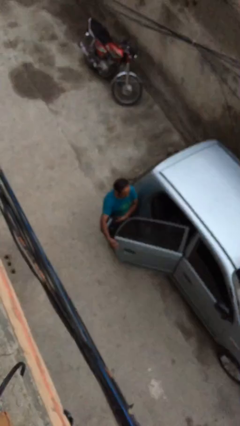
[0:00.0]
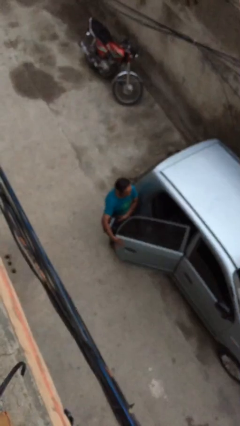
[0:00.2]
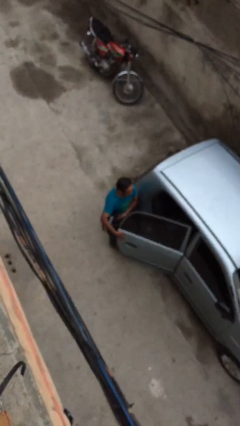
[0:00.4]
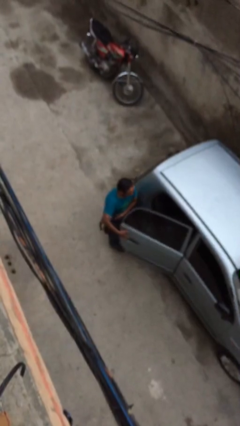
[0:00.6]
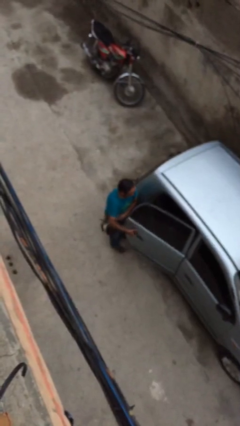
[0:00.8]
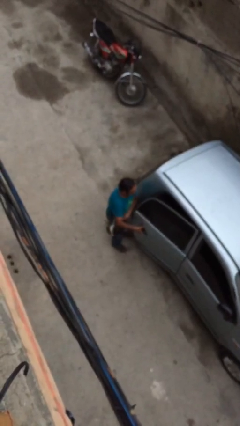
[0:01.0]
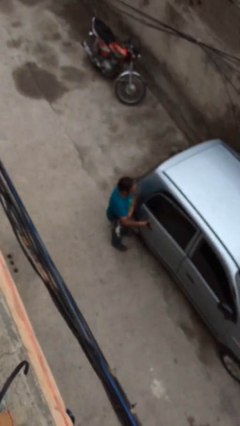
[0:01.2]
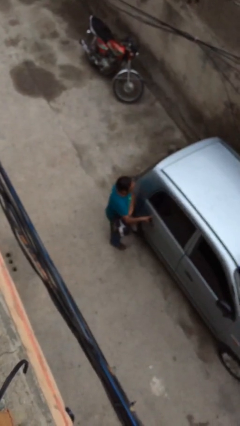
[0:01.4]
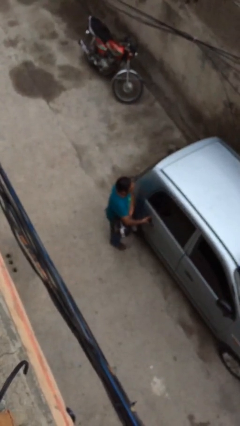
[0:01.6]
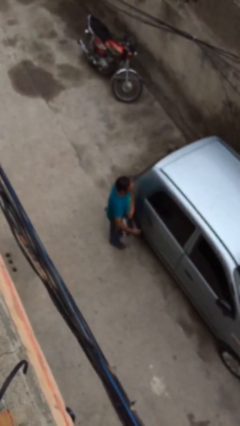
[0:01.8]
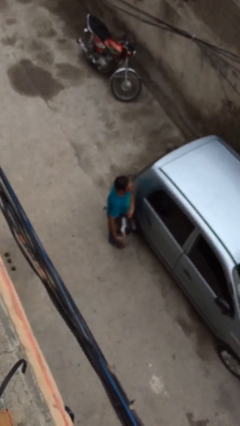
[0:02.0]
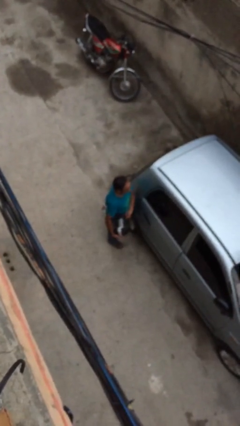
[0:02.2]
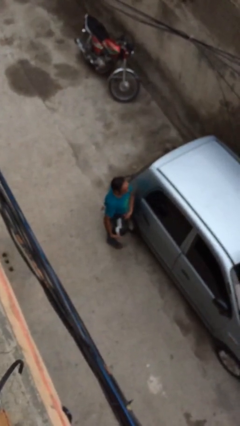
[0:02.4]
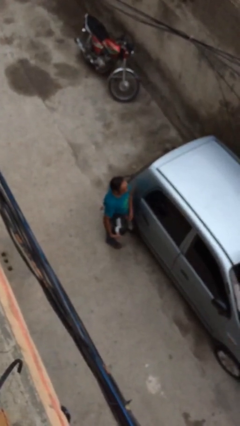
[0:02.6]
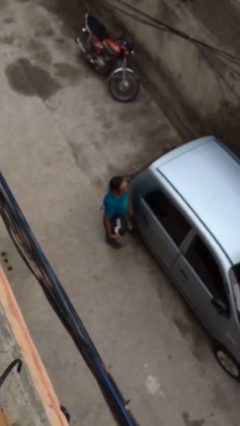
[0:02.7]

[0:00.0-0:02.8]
person closes car door

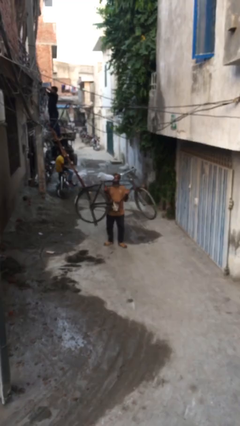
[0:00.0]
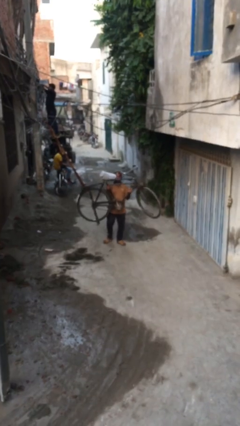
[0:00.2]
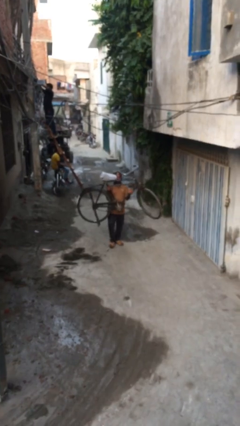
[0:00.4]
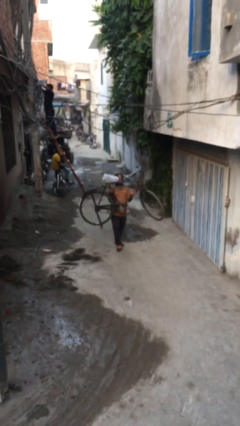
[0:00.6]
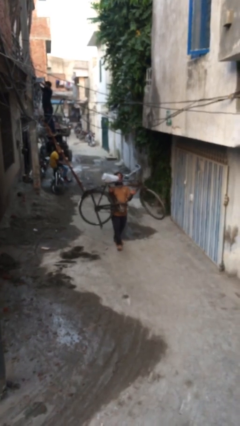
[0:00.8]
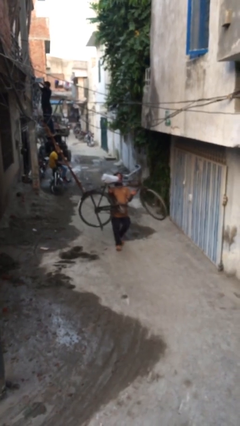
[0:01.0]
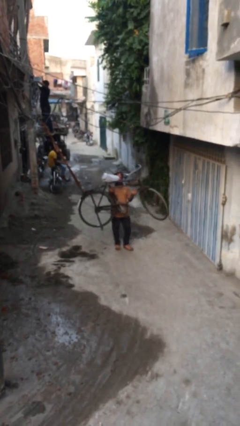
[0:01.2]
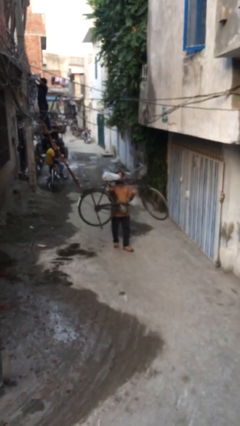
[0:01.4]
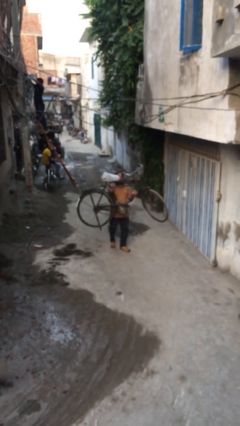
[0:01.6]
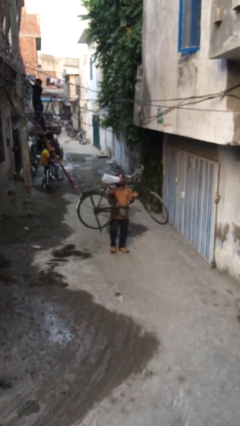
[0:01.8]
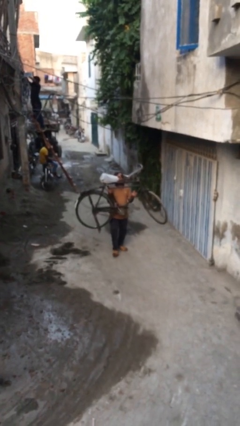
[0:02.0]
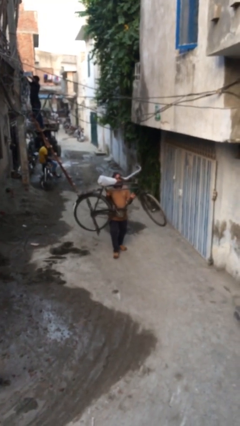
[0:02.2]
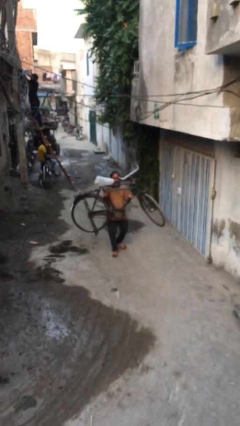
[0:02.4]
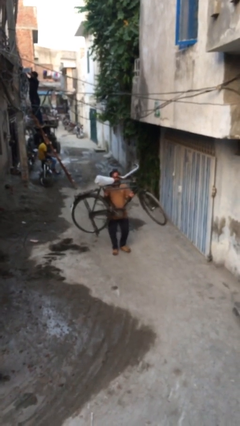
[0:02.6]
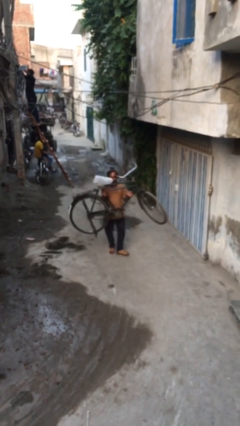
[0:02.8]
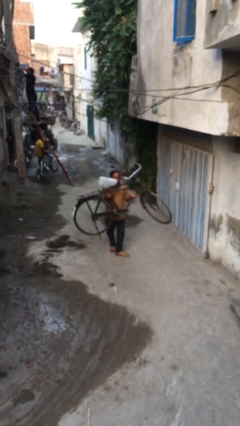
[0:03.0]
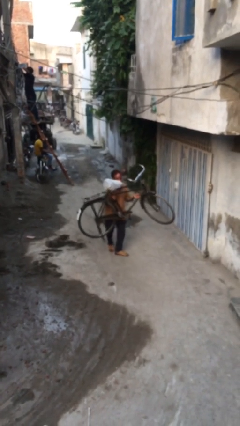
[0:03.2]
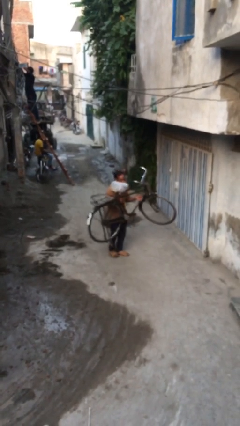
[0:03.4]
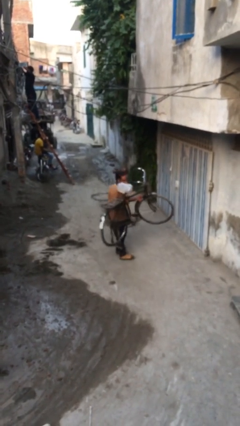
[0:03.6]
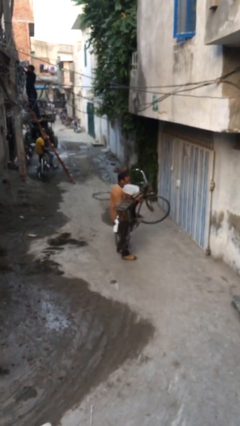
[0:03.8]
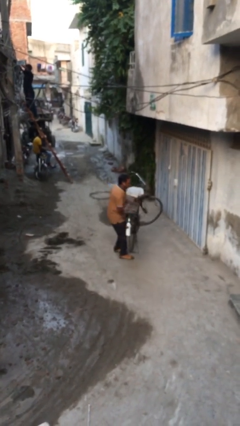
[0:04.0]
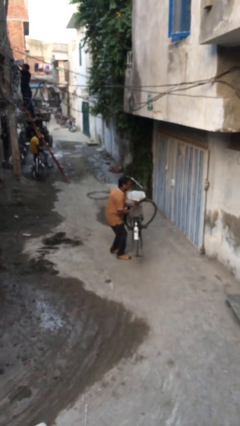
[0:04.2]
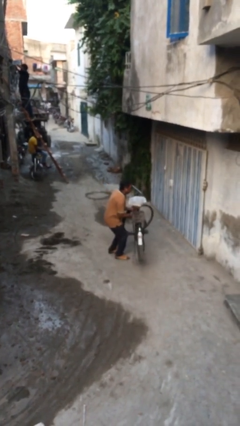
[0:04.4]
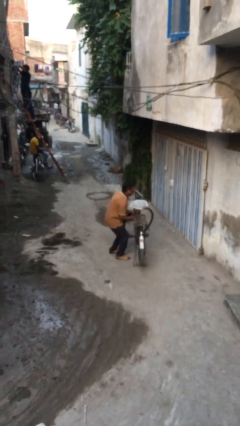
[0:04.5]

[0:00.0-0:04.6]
person carries heavy object

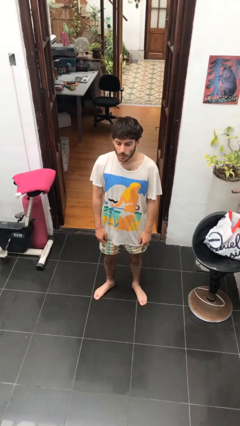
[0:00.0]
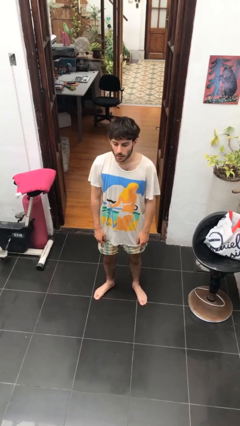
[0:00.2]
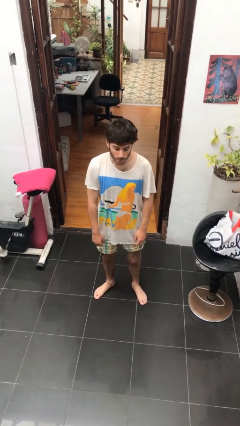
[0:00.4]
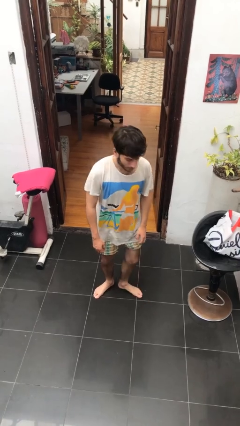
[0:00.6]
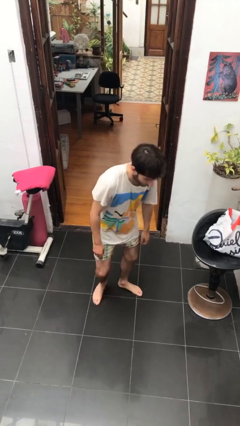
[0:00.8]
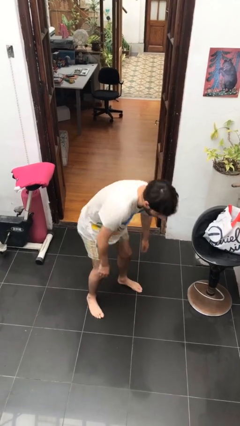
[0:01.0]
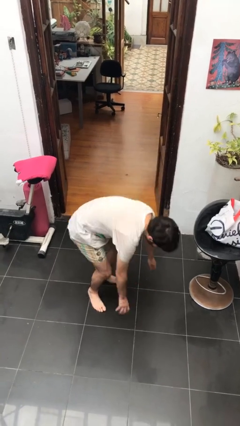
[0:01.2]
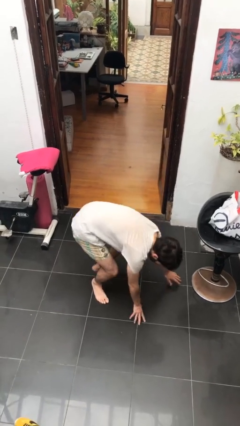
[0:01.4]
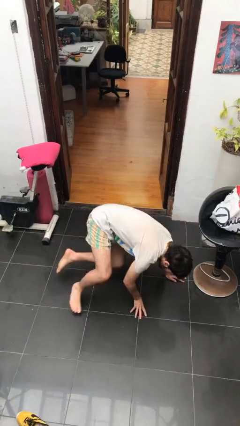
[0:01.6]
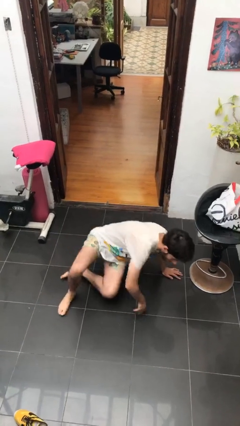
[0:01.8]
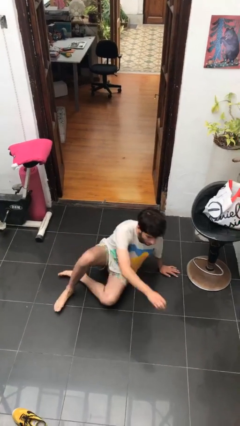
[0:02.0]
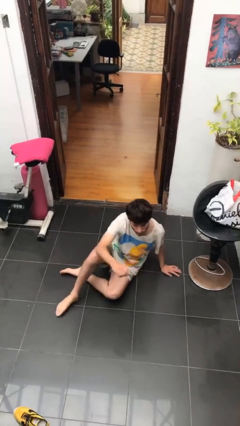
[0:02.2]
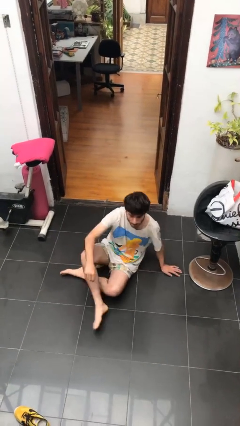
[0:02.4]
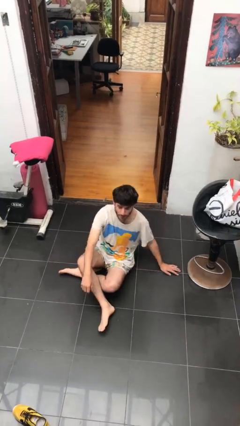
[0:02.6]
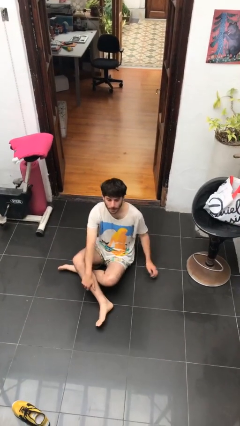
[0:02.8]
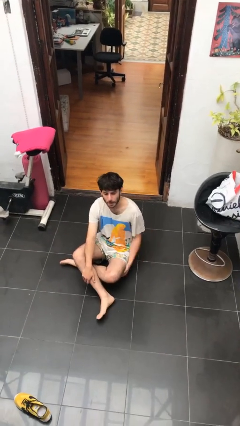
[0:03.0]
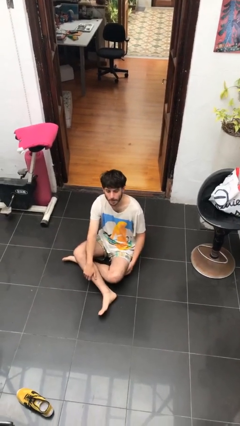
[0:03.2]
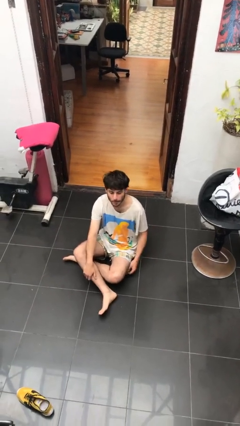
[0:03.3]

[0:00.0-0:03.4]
person sits down

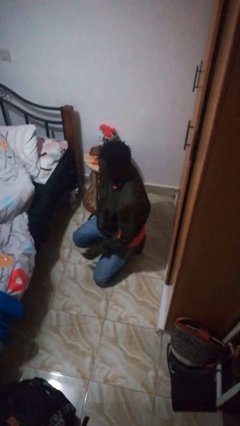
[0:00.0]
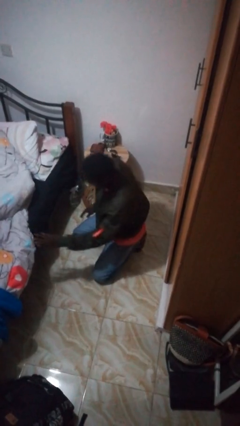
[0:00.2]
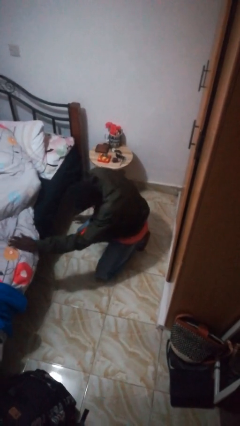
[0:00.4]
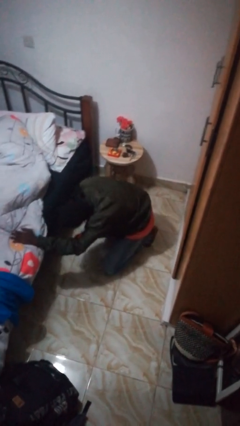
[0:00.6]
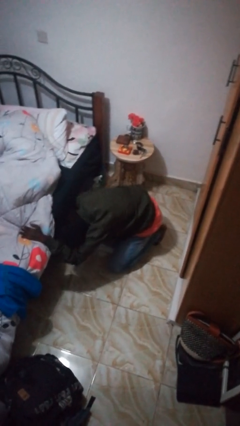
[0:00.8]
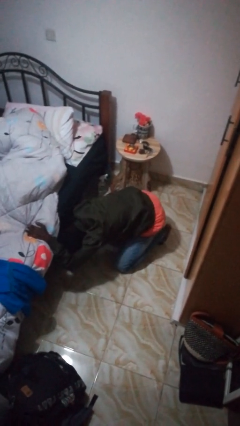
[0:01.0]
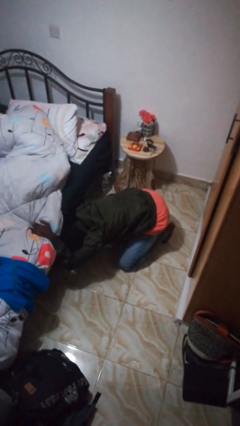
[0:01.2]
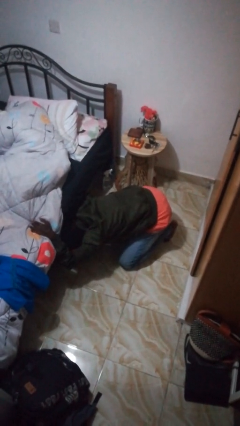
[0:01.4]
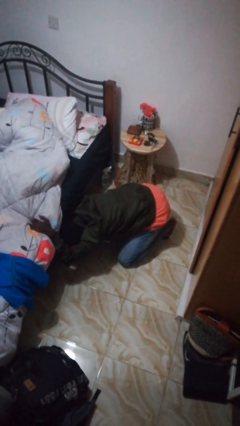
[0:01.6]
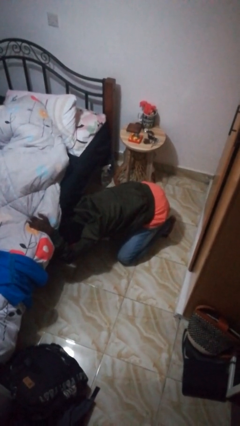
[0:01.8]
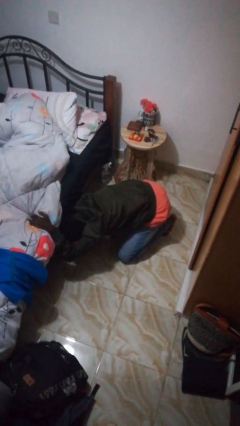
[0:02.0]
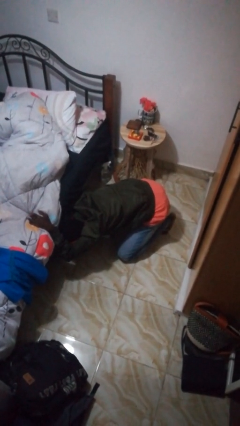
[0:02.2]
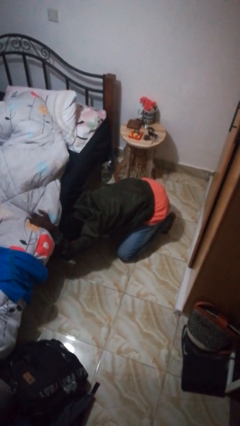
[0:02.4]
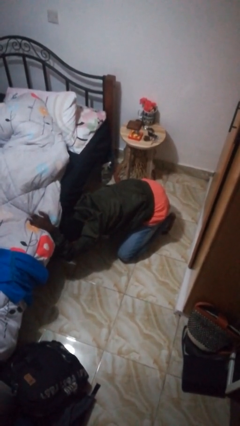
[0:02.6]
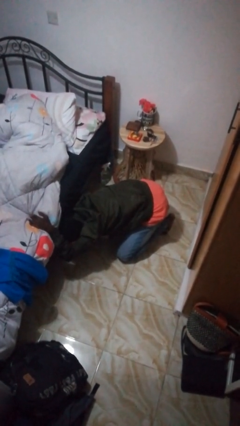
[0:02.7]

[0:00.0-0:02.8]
person searches under bed

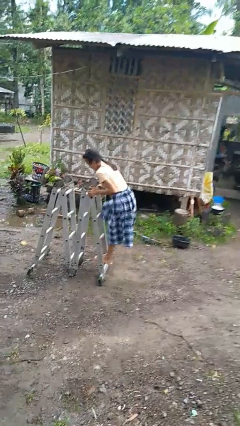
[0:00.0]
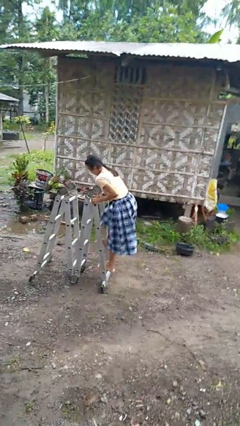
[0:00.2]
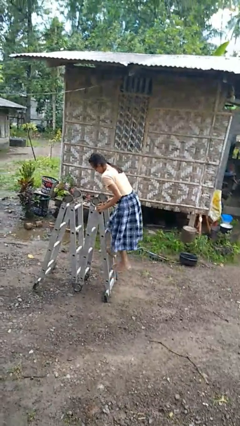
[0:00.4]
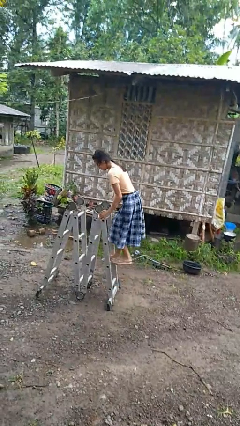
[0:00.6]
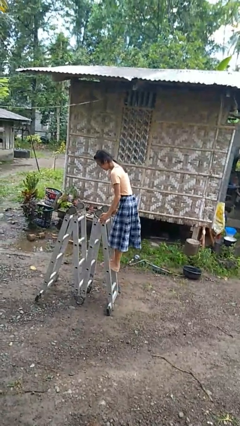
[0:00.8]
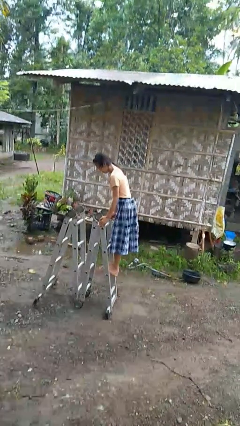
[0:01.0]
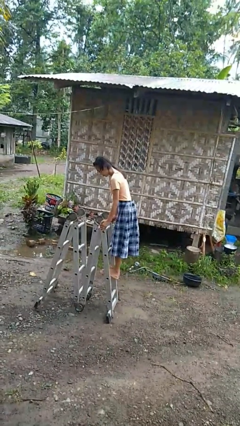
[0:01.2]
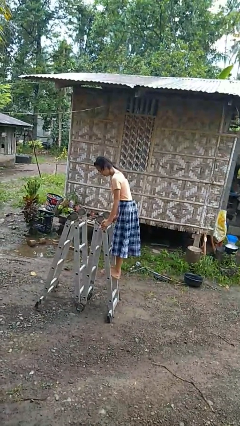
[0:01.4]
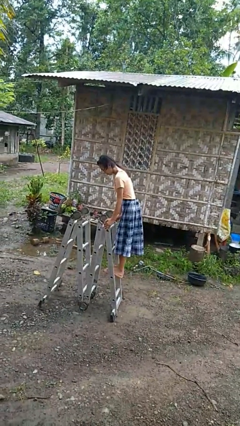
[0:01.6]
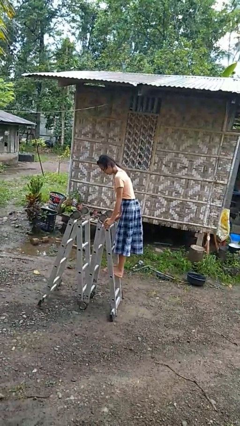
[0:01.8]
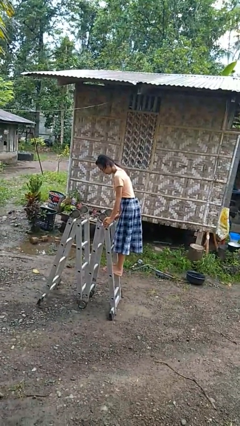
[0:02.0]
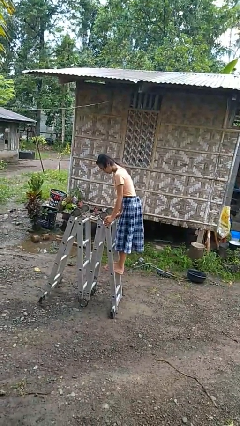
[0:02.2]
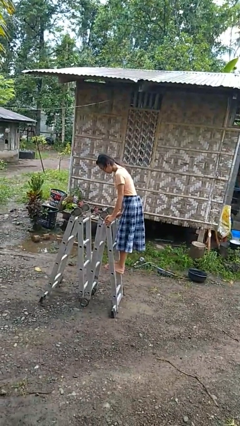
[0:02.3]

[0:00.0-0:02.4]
person climbs up ladder

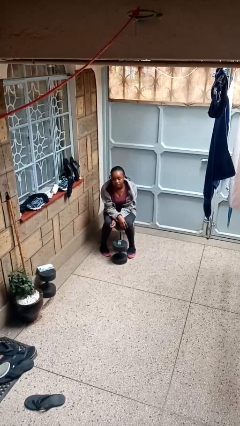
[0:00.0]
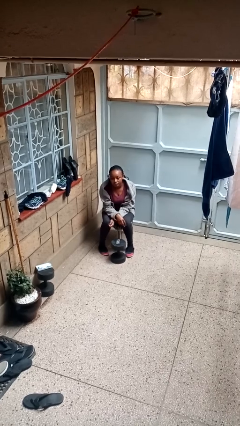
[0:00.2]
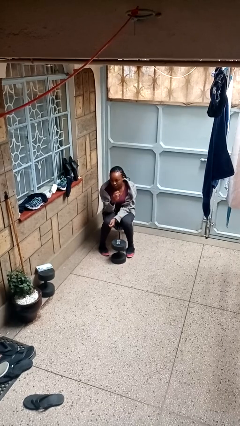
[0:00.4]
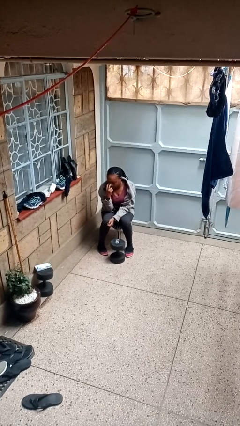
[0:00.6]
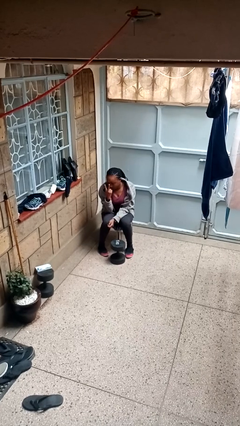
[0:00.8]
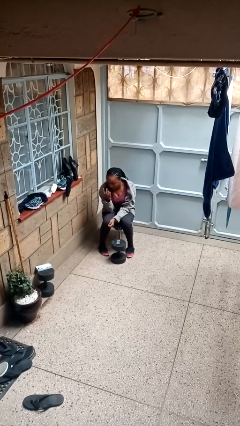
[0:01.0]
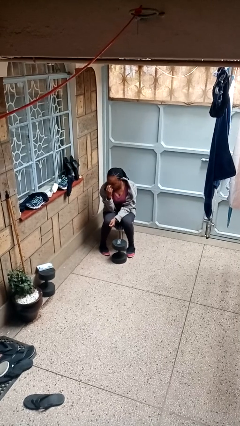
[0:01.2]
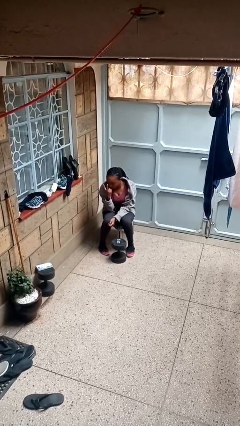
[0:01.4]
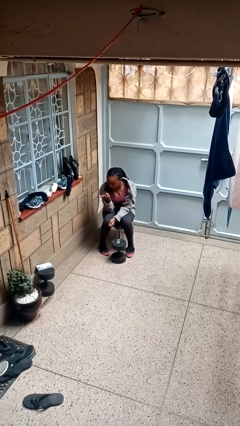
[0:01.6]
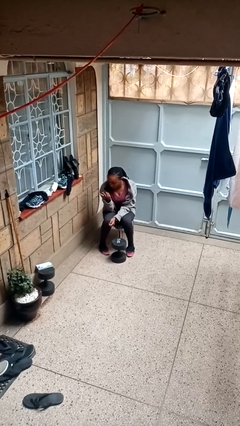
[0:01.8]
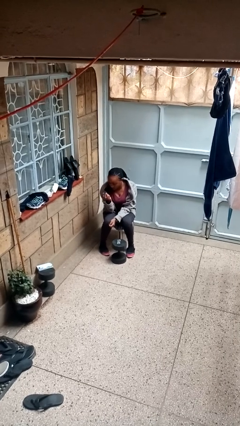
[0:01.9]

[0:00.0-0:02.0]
person gestures watch closely
